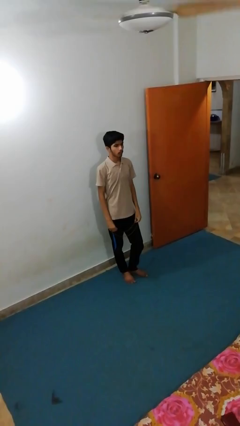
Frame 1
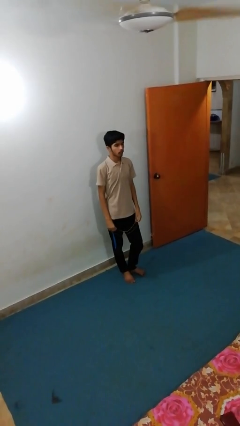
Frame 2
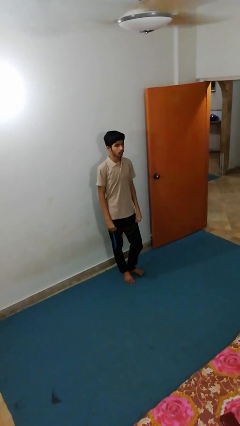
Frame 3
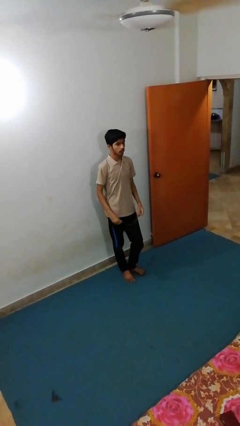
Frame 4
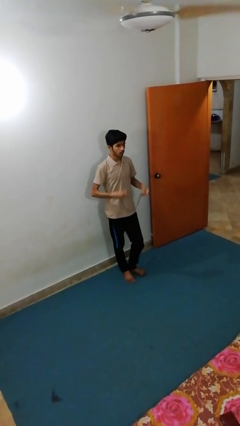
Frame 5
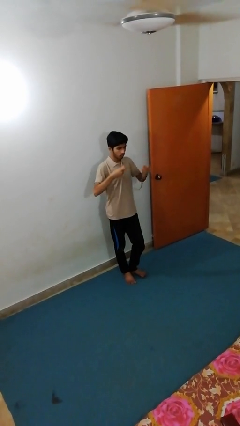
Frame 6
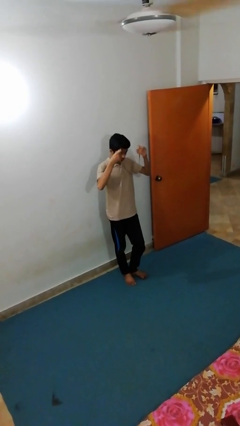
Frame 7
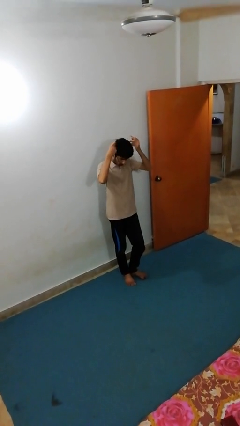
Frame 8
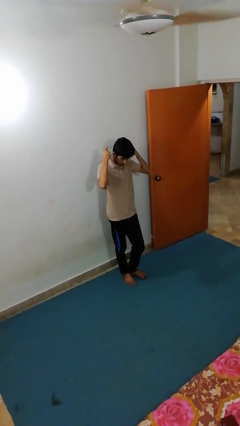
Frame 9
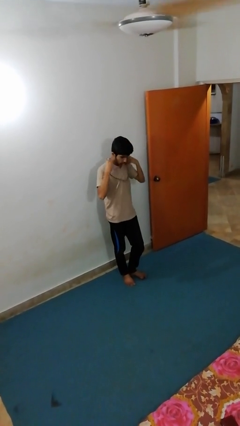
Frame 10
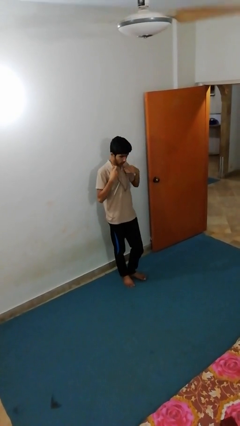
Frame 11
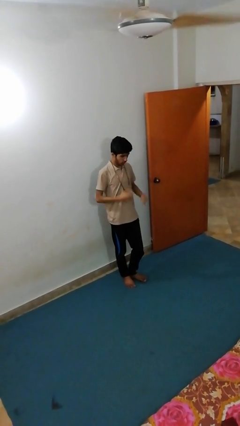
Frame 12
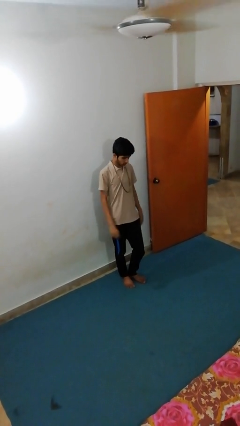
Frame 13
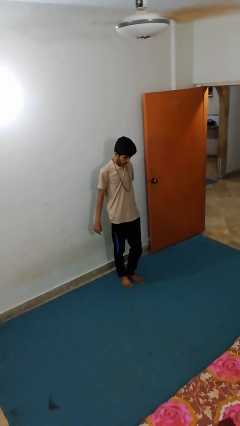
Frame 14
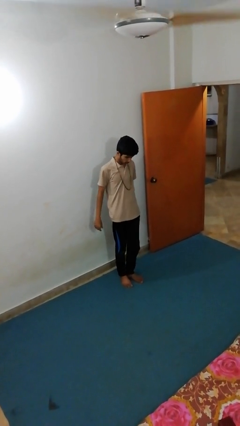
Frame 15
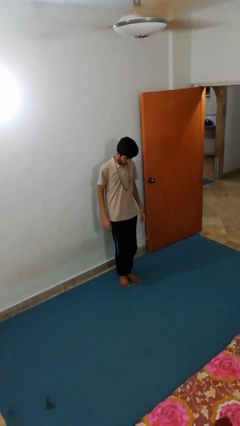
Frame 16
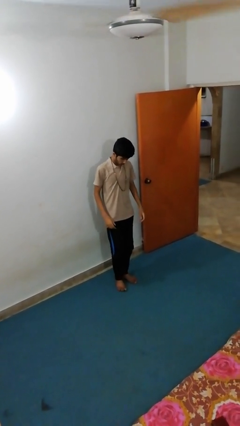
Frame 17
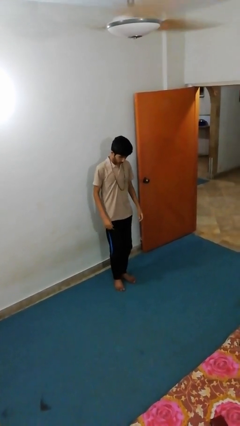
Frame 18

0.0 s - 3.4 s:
person puts on necklace

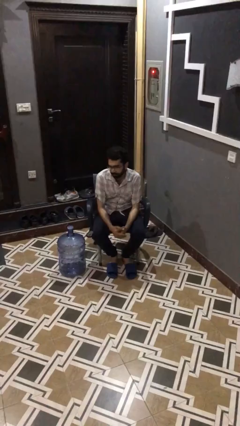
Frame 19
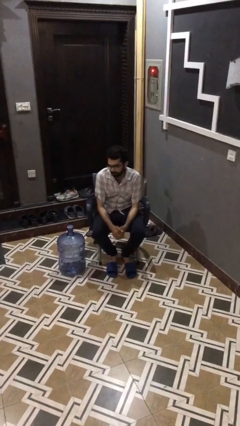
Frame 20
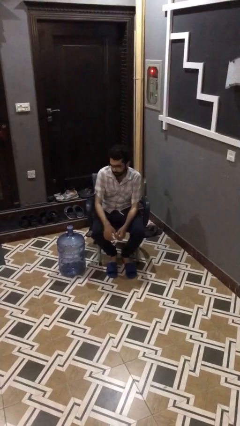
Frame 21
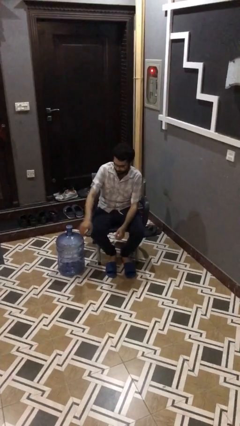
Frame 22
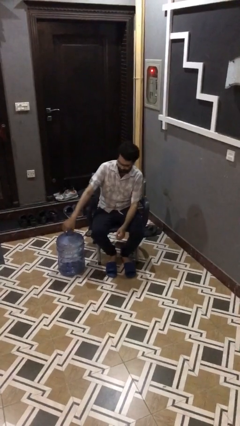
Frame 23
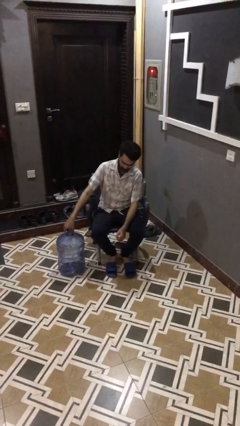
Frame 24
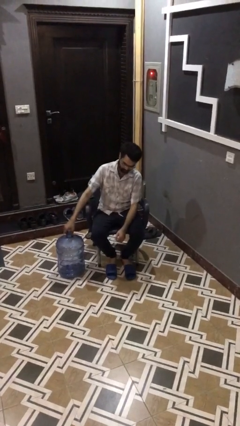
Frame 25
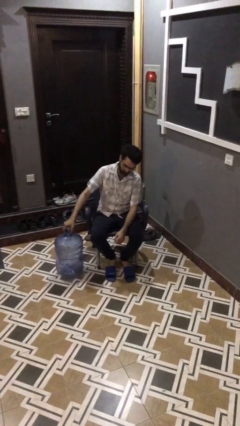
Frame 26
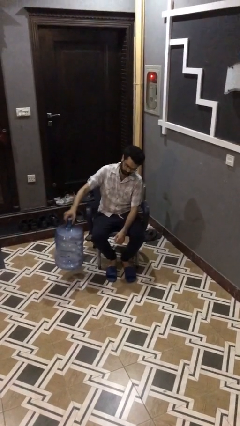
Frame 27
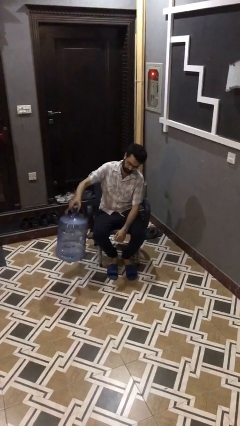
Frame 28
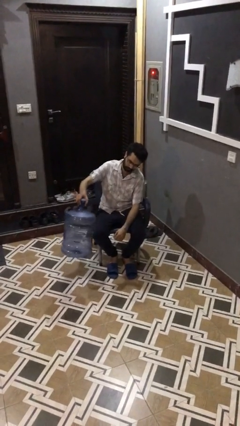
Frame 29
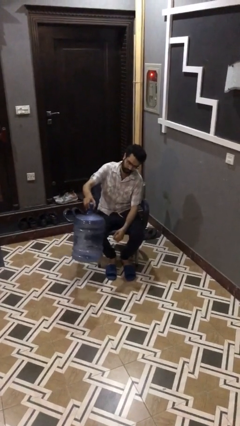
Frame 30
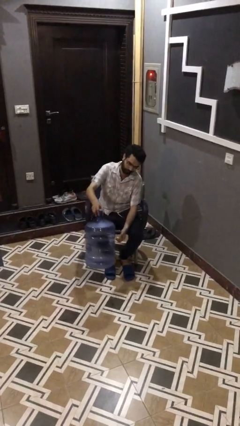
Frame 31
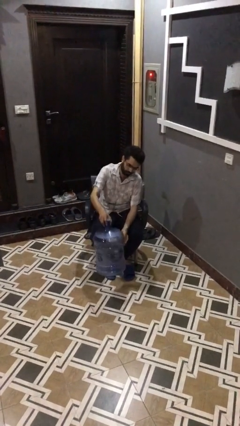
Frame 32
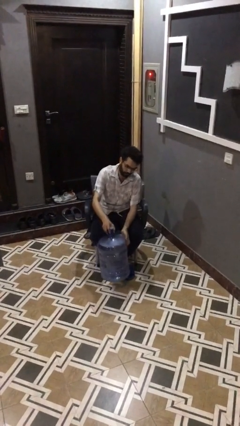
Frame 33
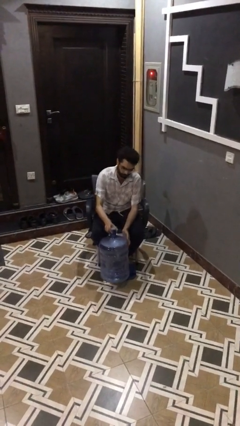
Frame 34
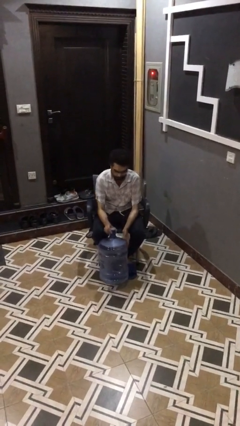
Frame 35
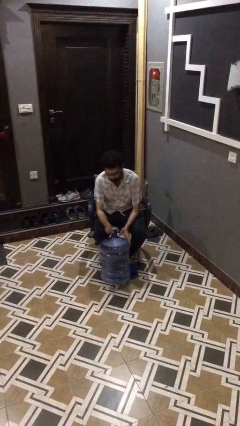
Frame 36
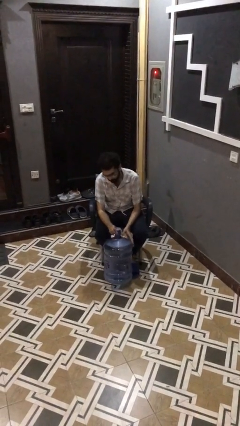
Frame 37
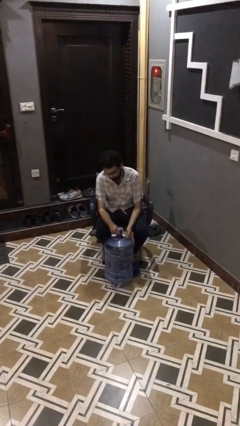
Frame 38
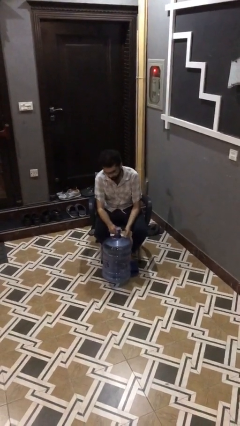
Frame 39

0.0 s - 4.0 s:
person picks up object from floor

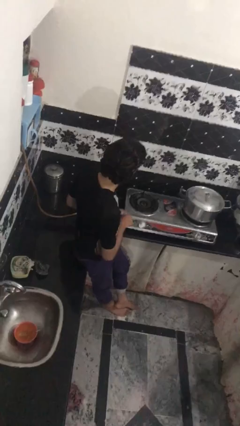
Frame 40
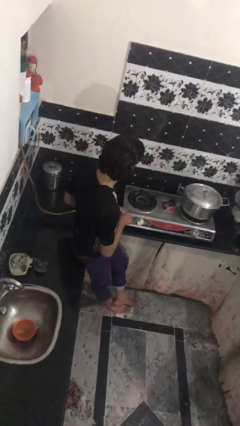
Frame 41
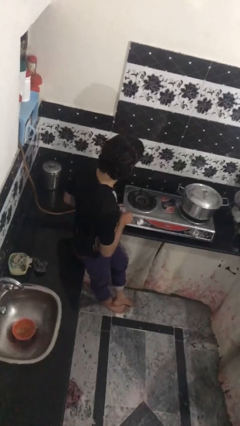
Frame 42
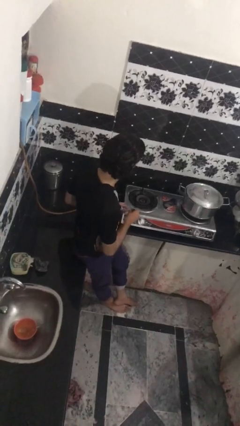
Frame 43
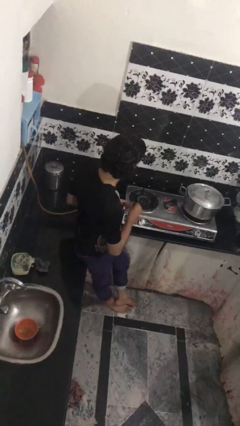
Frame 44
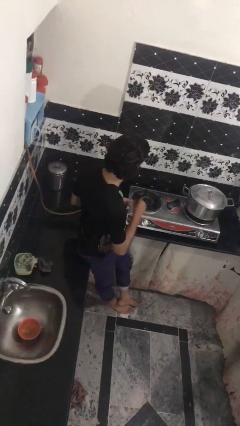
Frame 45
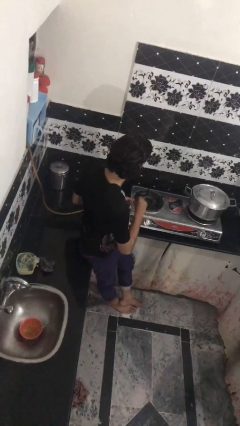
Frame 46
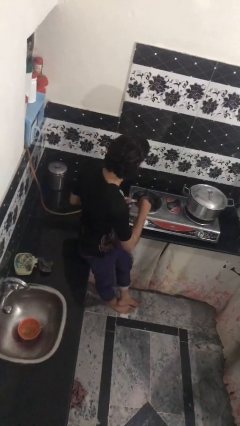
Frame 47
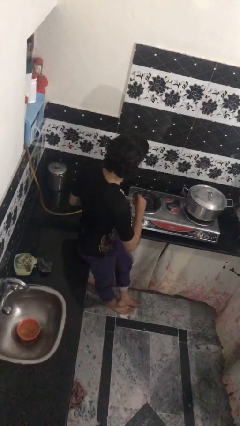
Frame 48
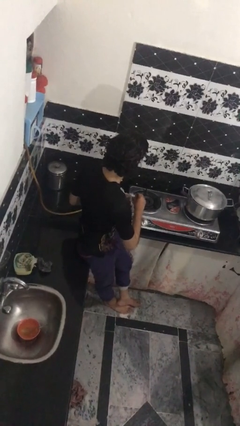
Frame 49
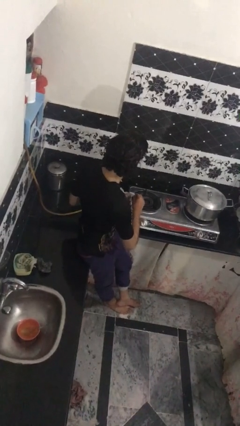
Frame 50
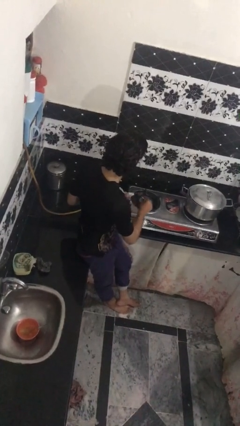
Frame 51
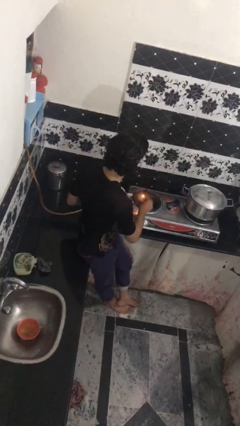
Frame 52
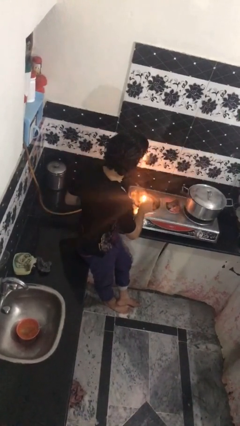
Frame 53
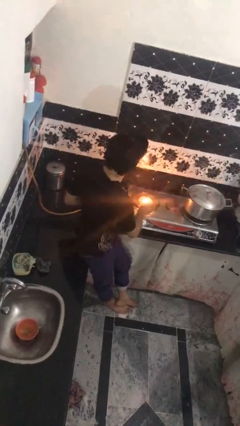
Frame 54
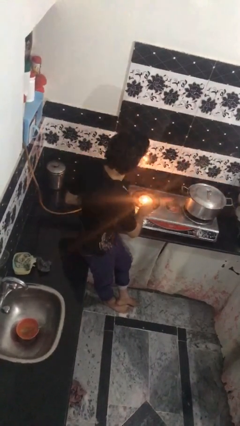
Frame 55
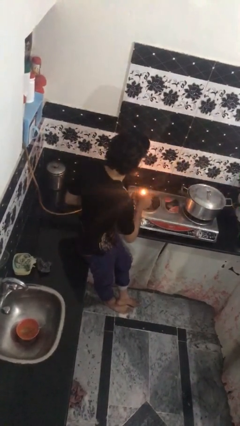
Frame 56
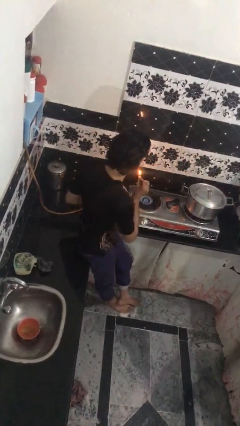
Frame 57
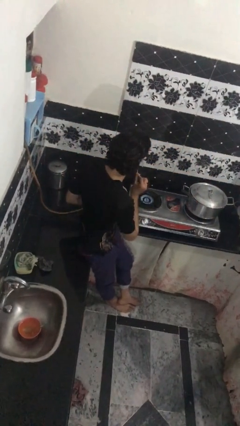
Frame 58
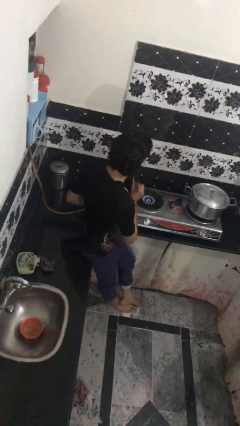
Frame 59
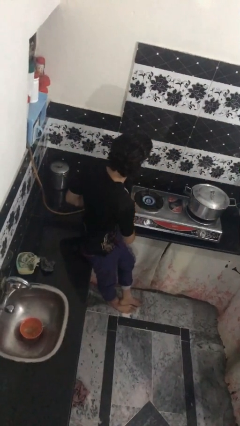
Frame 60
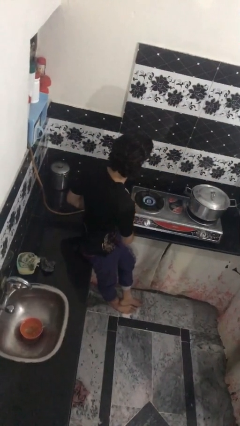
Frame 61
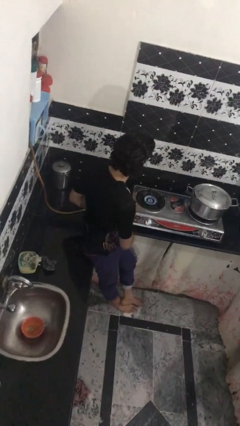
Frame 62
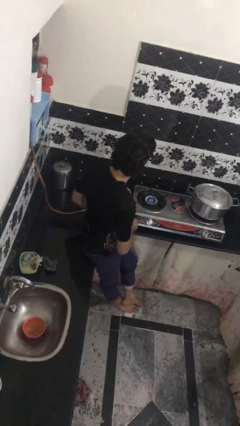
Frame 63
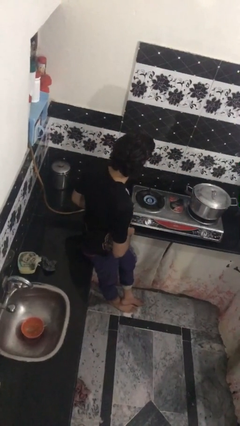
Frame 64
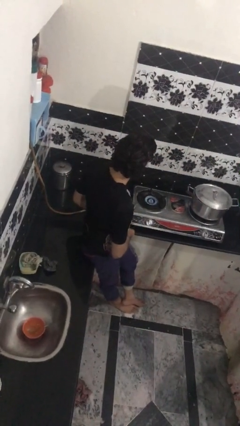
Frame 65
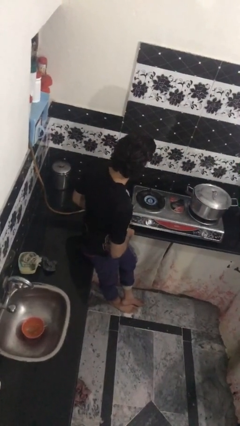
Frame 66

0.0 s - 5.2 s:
person turns on stovetop

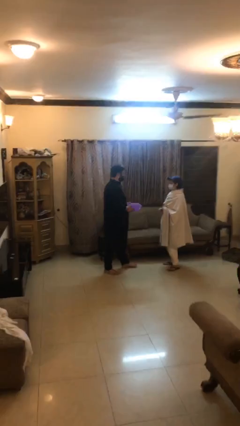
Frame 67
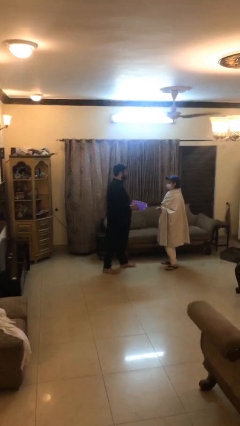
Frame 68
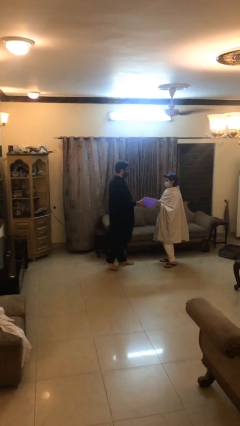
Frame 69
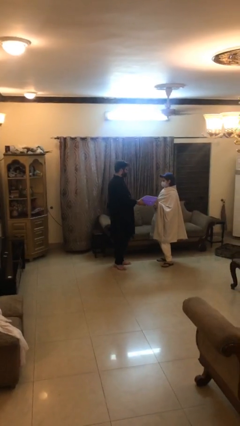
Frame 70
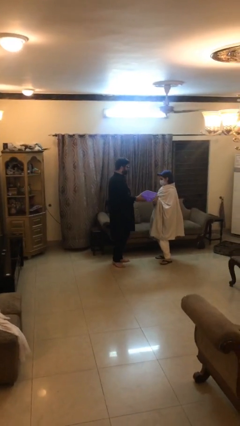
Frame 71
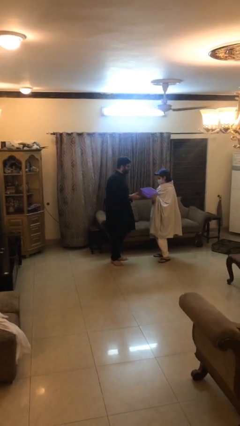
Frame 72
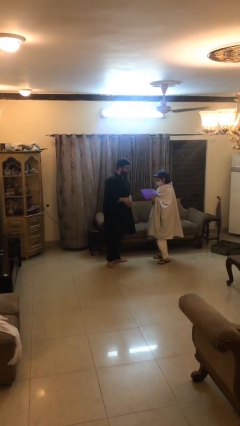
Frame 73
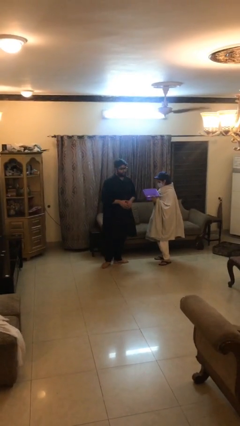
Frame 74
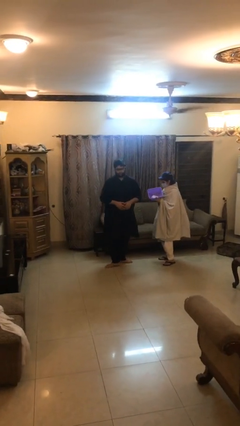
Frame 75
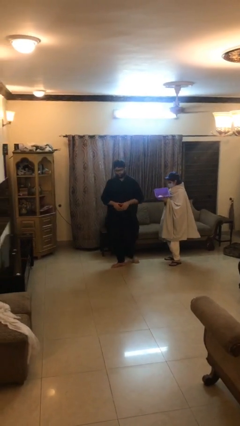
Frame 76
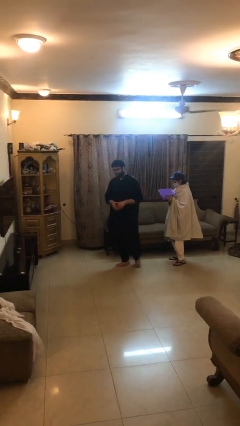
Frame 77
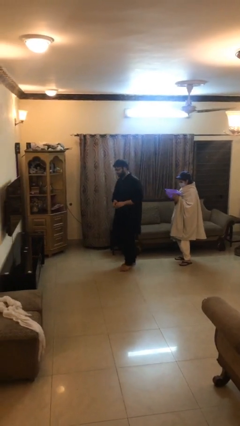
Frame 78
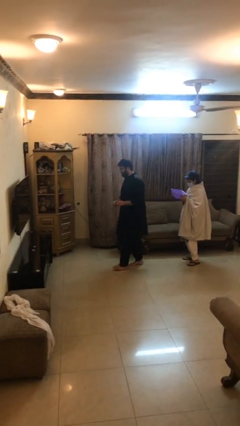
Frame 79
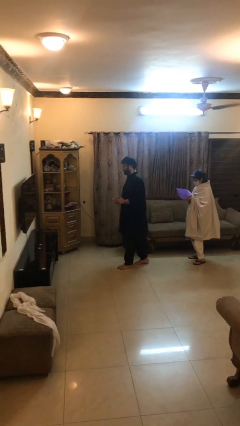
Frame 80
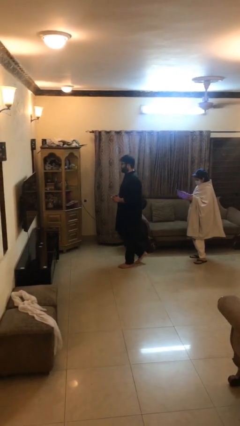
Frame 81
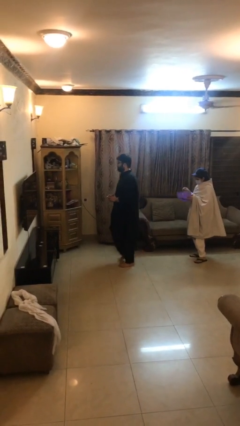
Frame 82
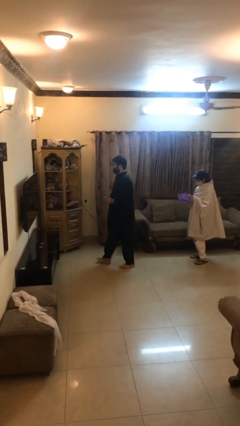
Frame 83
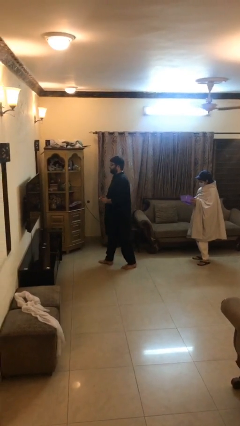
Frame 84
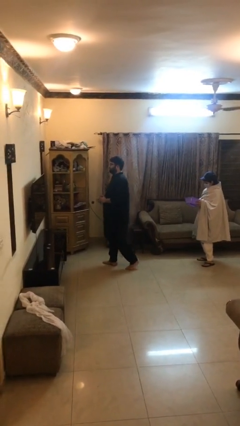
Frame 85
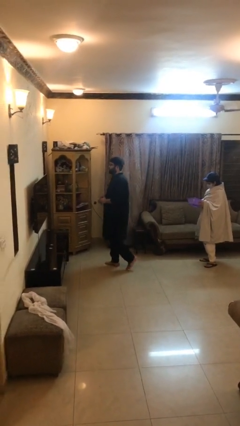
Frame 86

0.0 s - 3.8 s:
person transfers object to person

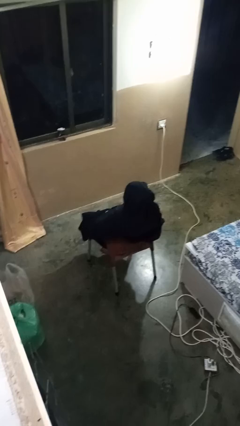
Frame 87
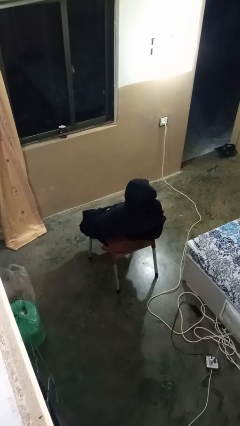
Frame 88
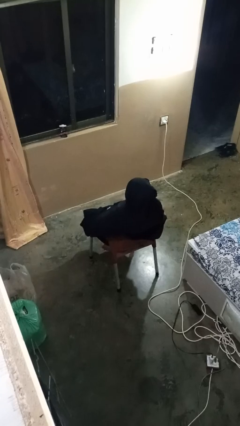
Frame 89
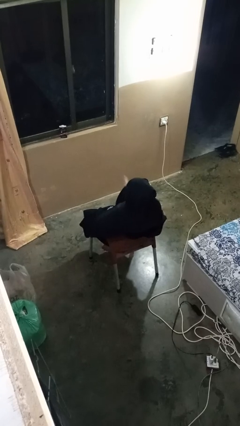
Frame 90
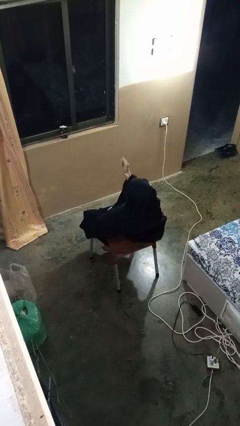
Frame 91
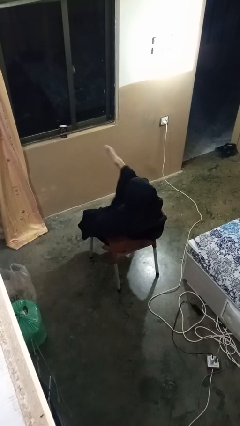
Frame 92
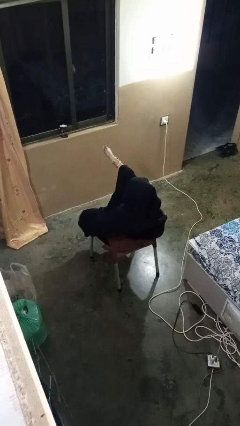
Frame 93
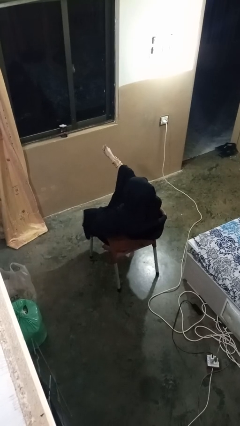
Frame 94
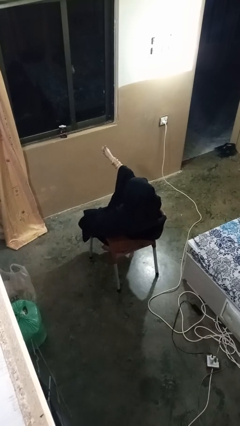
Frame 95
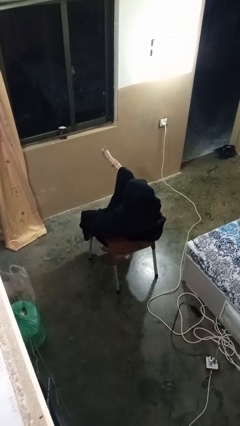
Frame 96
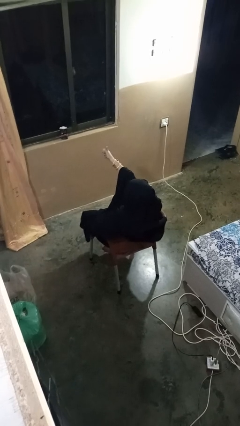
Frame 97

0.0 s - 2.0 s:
person gestures thumbs up
